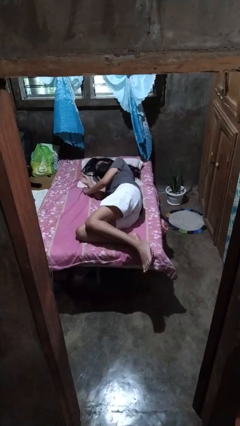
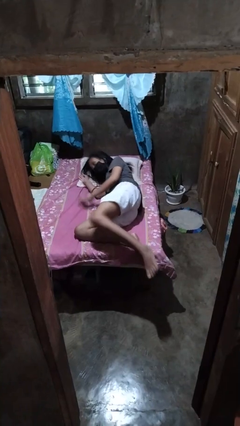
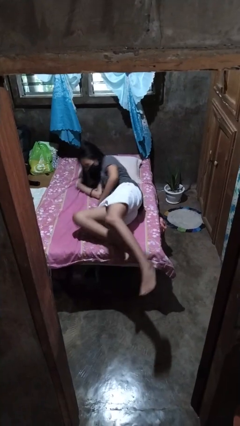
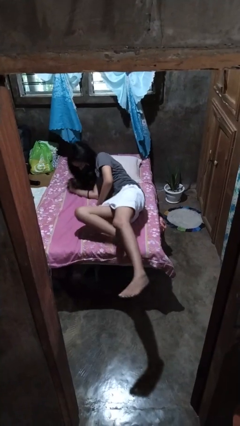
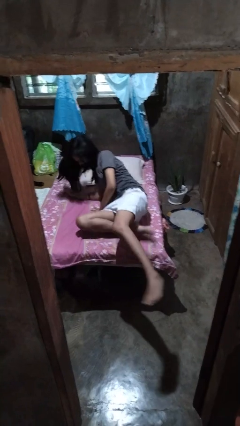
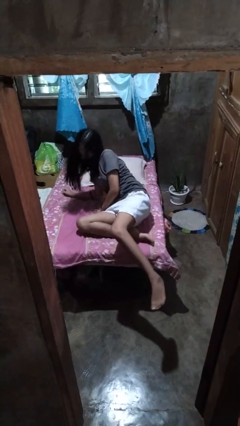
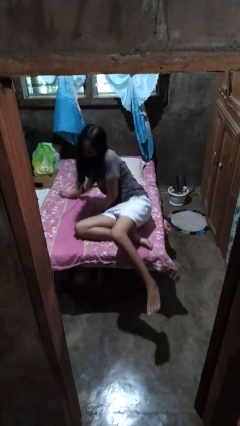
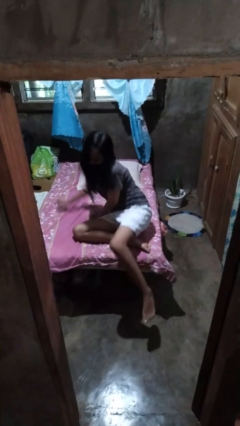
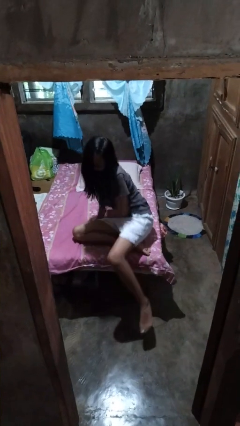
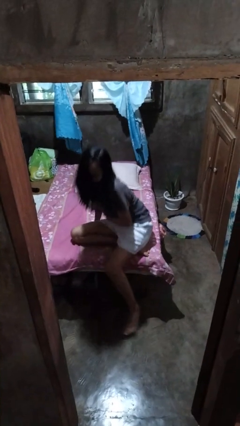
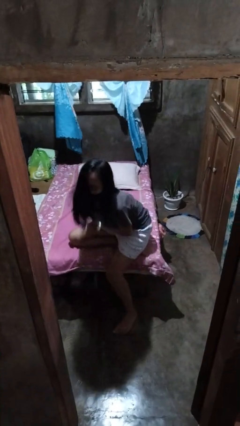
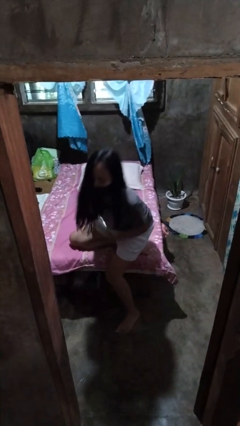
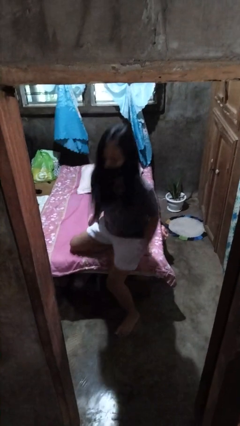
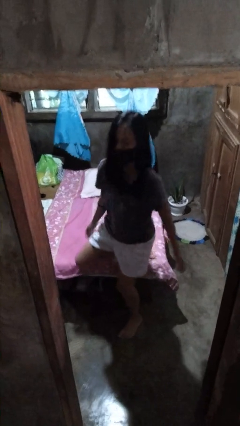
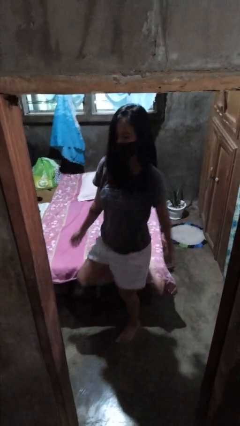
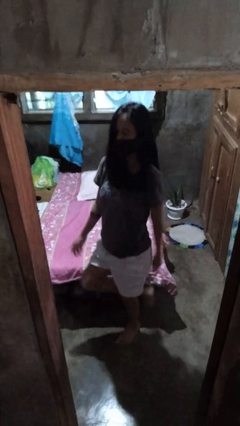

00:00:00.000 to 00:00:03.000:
person stands up

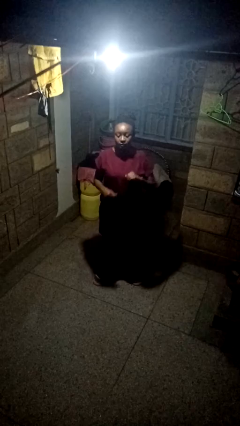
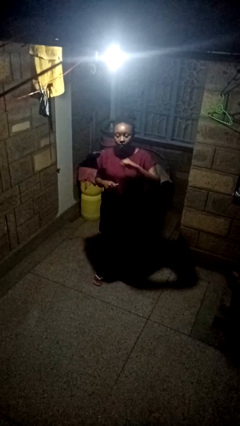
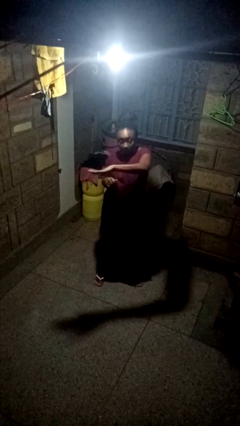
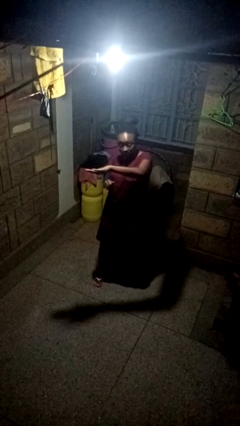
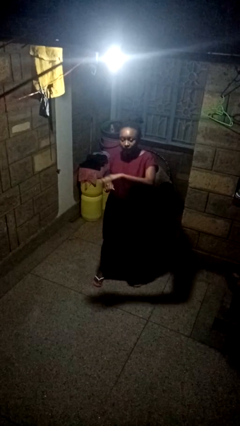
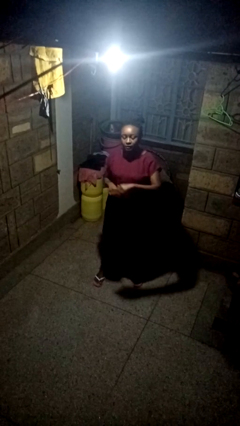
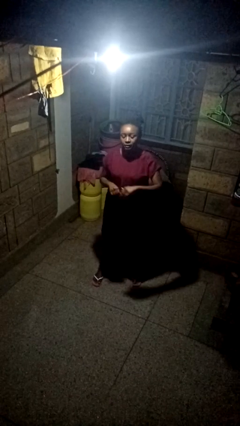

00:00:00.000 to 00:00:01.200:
person karate chop

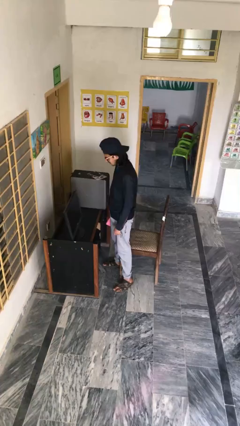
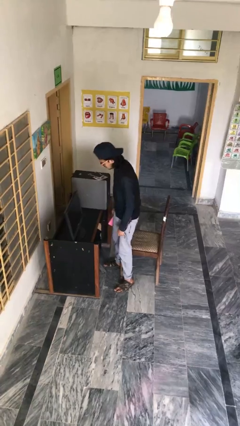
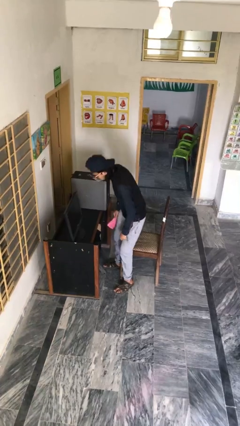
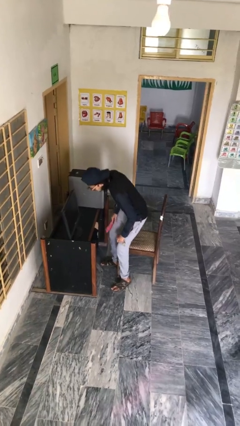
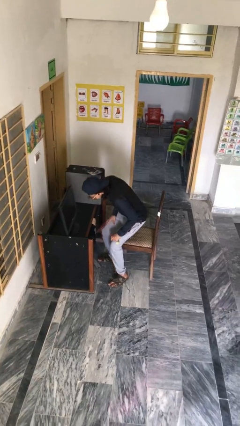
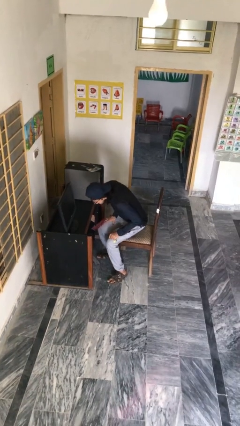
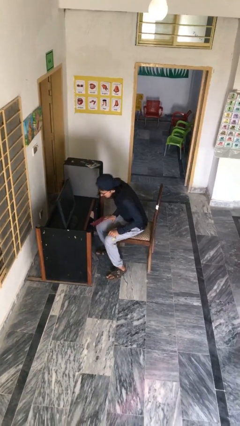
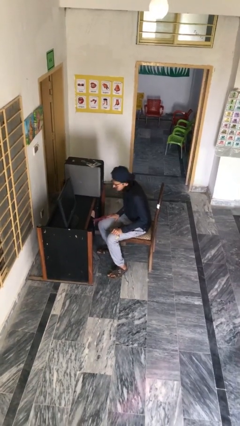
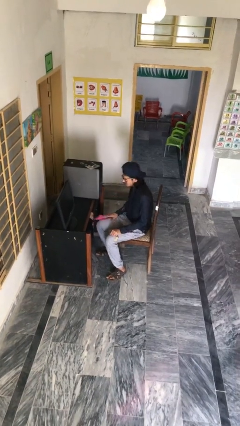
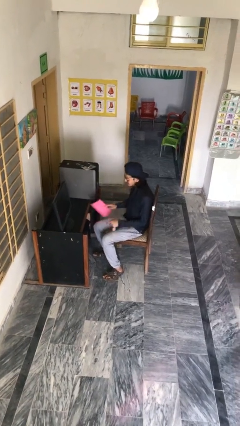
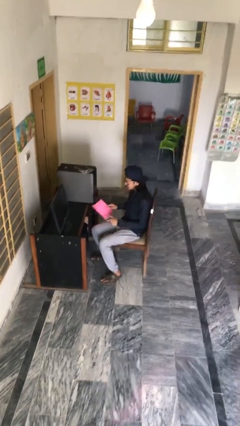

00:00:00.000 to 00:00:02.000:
person sits down

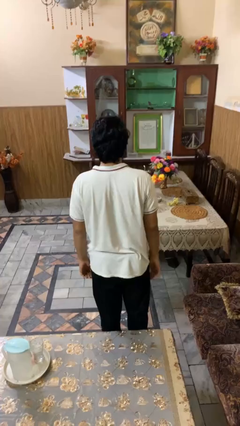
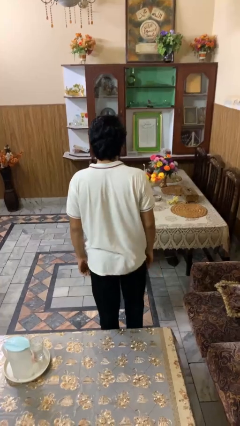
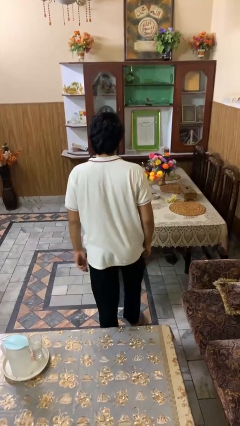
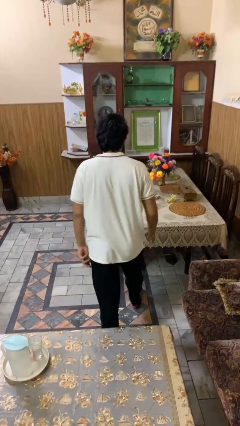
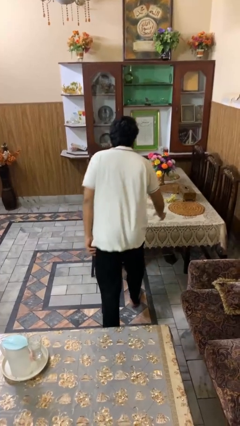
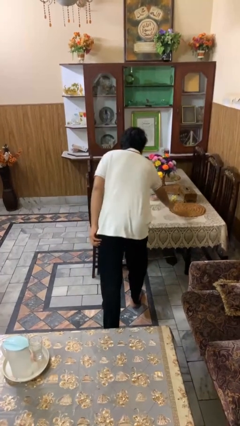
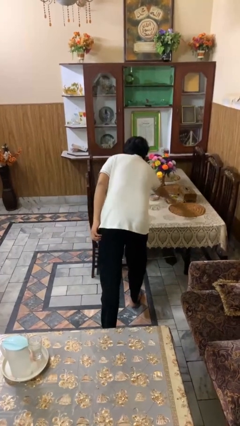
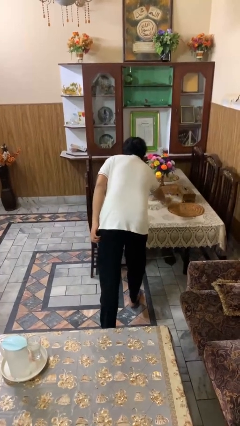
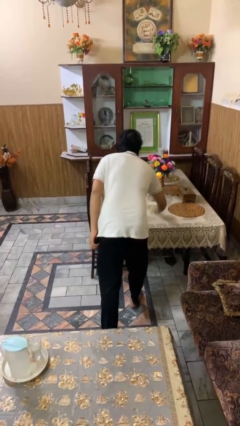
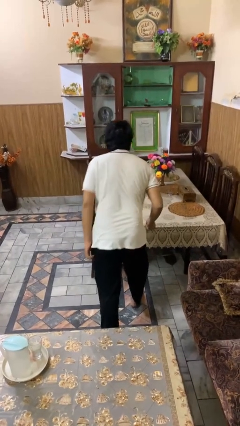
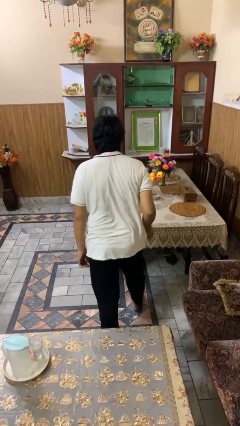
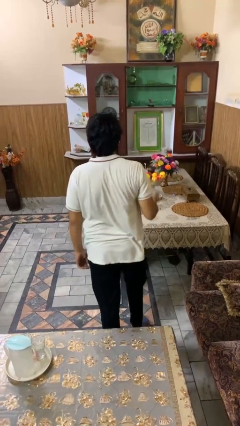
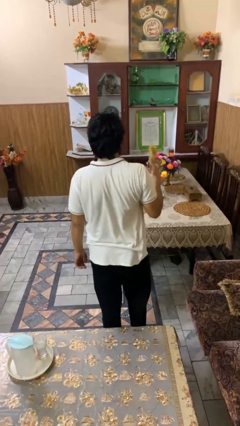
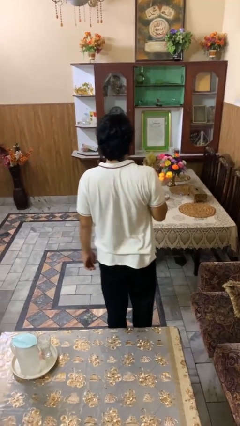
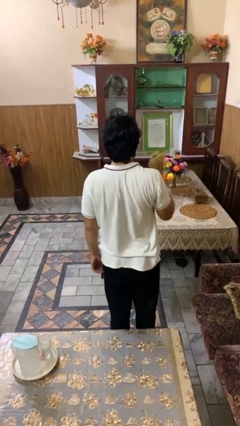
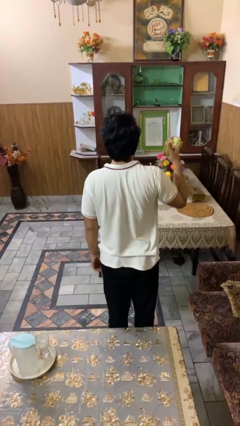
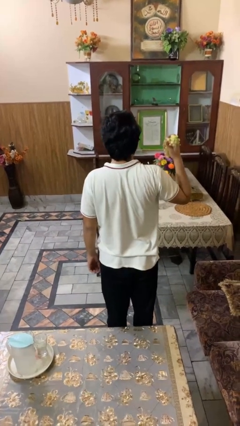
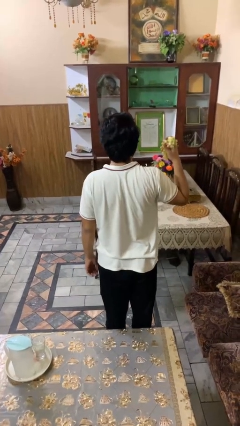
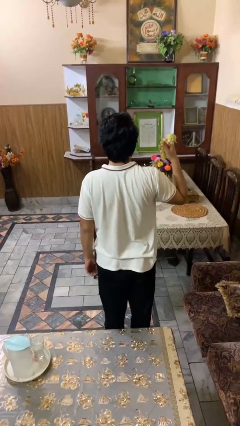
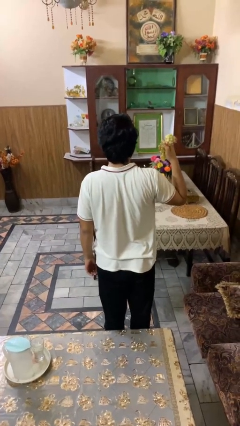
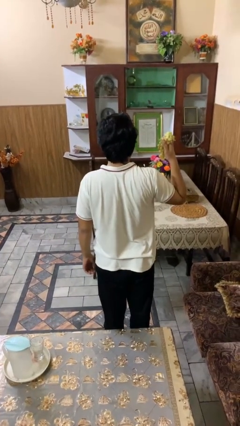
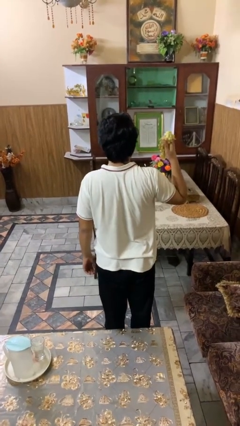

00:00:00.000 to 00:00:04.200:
person picks up object from table

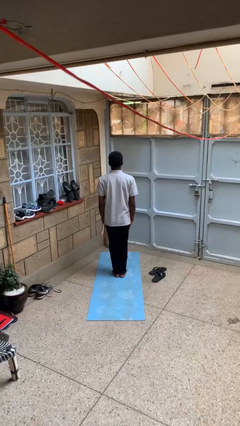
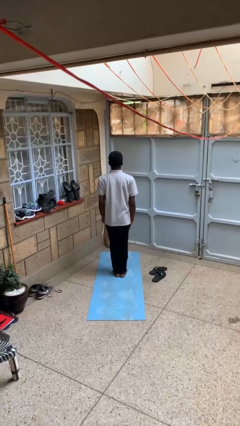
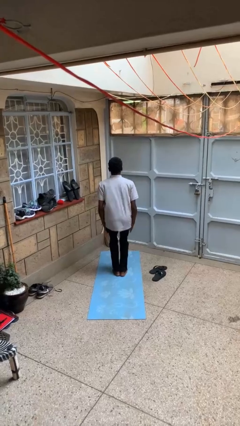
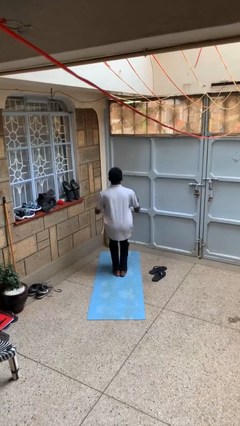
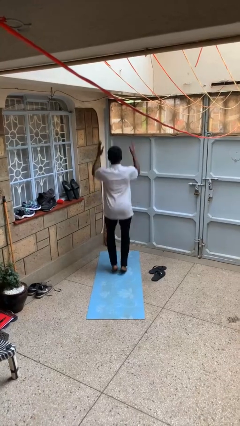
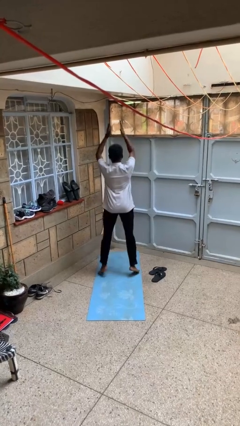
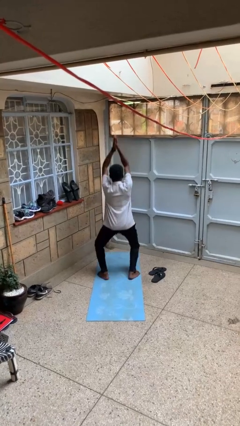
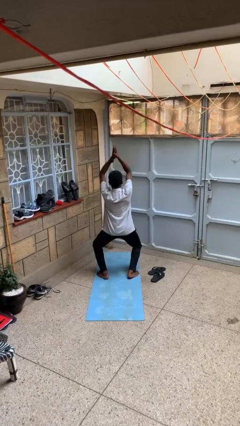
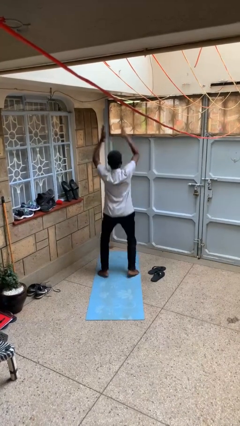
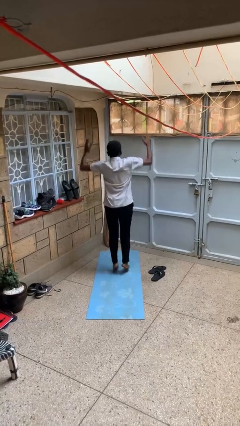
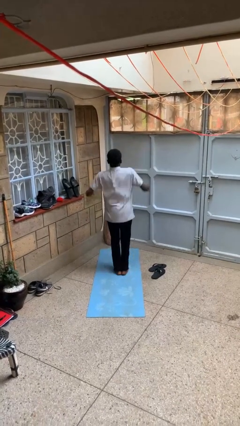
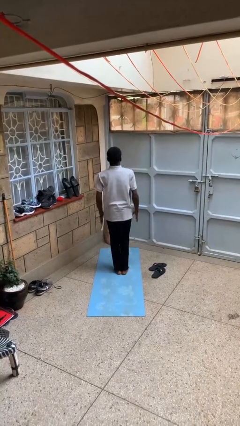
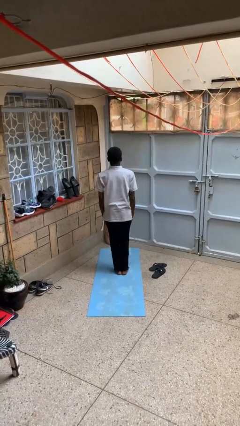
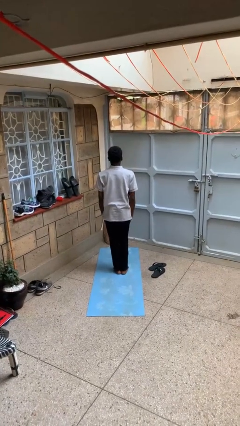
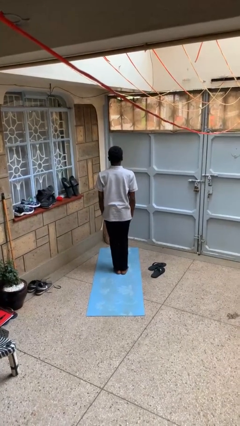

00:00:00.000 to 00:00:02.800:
person exercises with jumping jacks

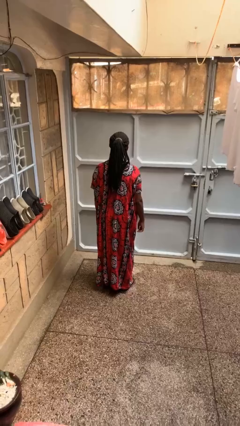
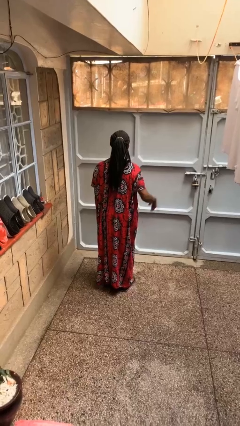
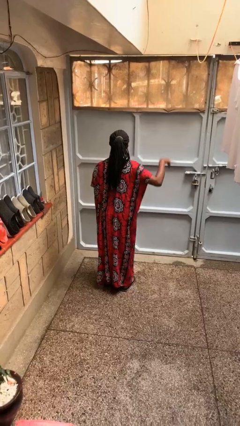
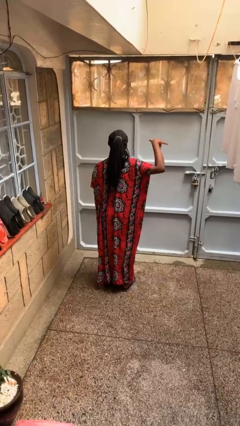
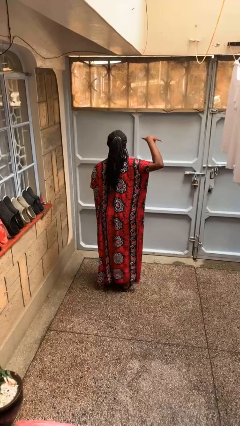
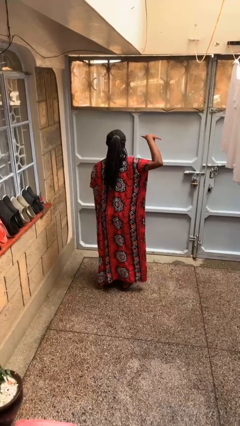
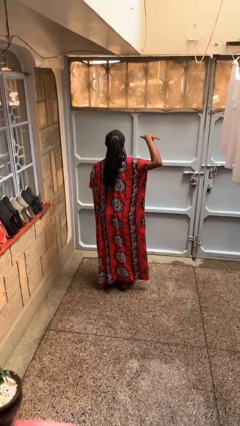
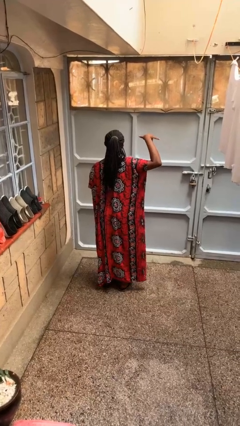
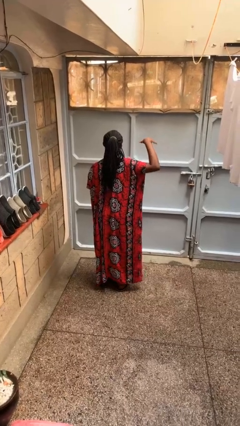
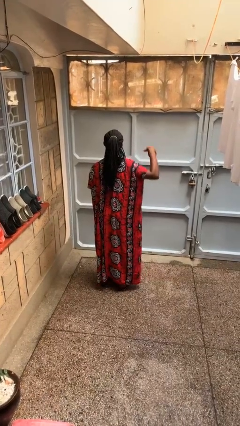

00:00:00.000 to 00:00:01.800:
person gestures hang loose

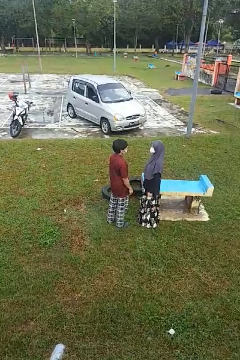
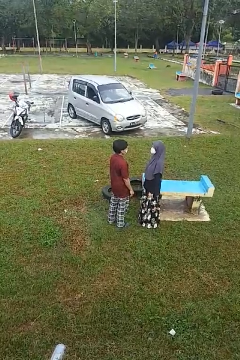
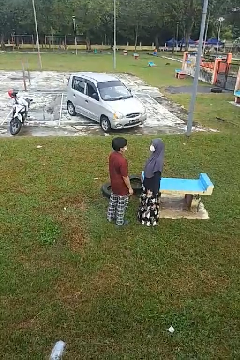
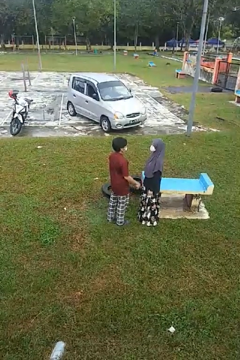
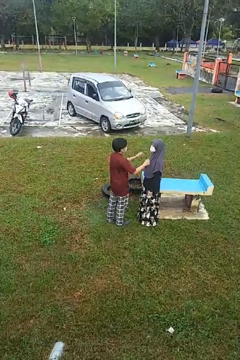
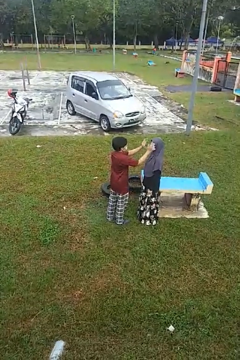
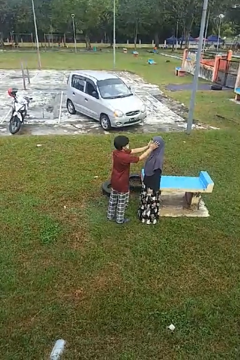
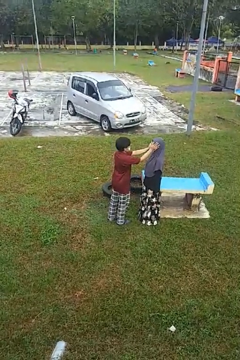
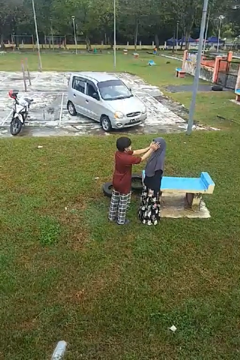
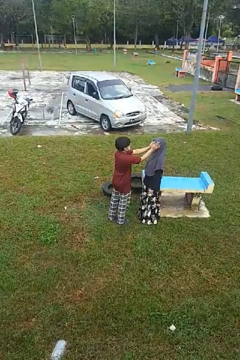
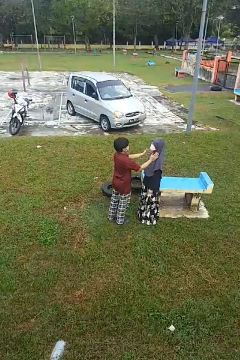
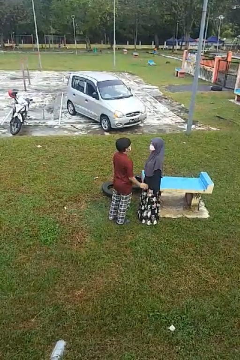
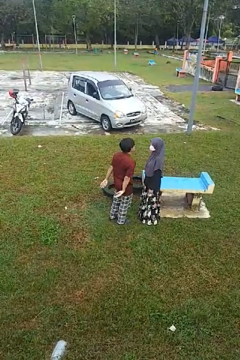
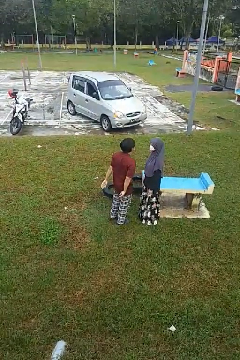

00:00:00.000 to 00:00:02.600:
person touches face of person
